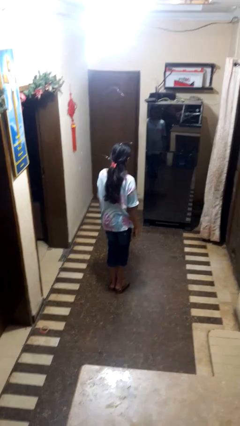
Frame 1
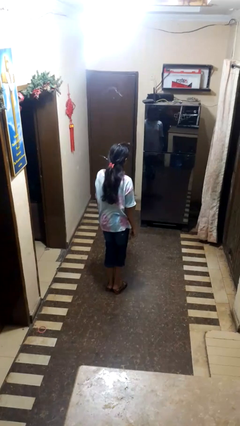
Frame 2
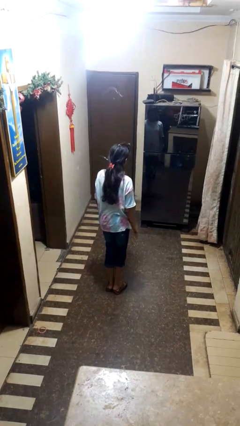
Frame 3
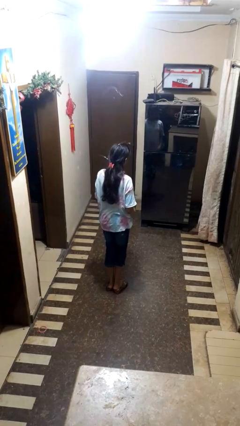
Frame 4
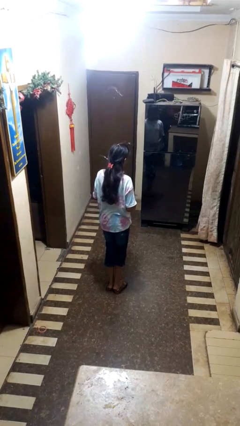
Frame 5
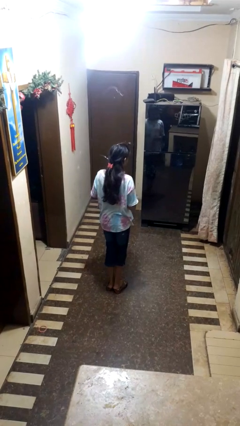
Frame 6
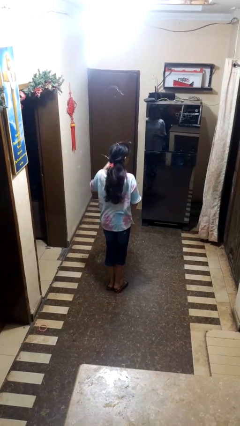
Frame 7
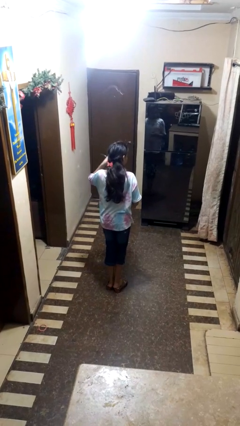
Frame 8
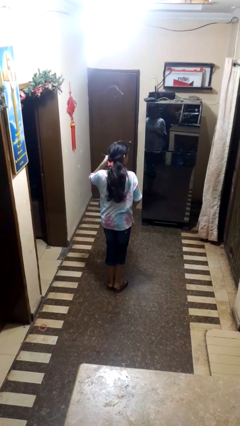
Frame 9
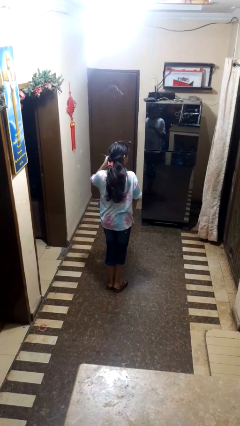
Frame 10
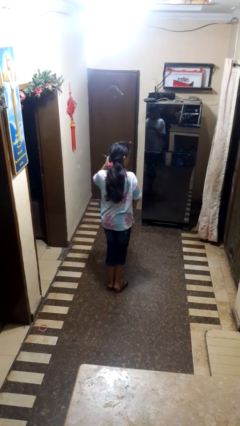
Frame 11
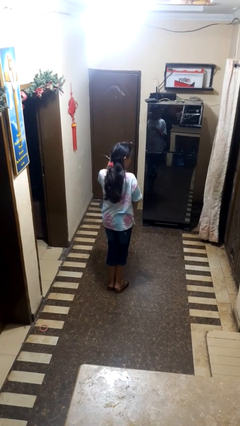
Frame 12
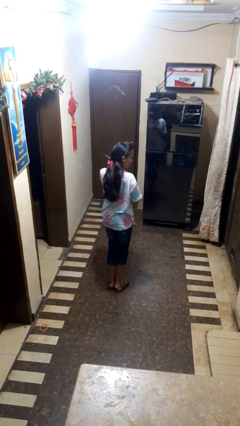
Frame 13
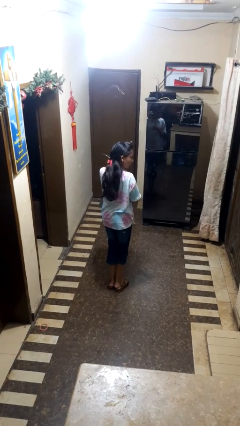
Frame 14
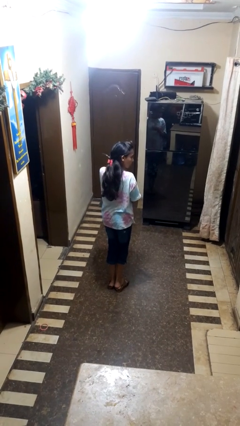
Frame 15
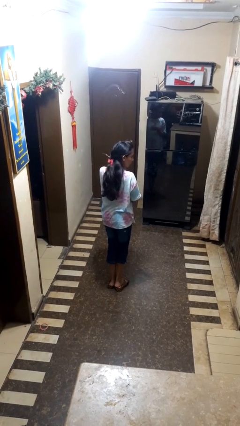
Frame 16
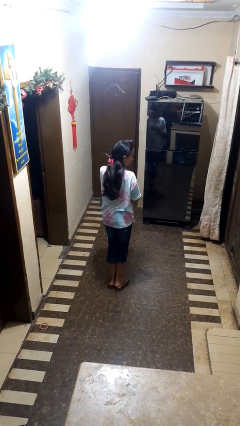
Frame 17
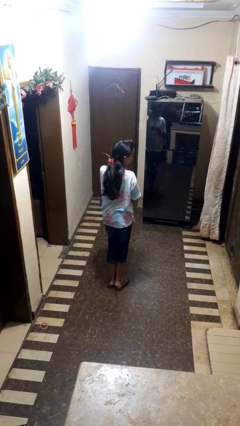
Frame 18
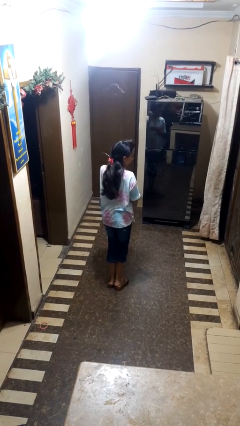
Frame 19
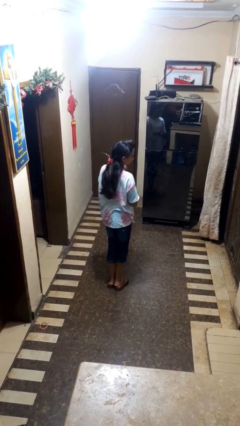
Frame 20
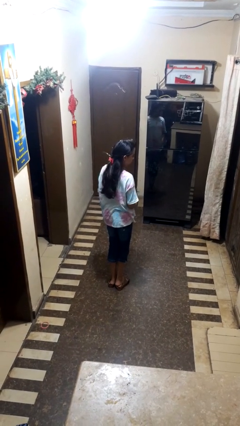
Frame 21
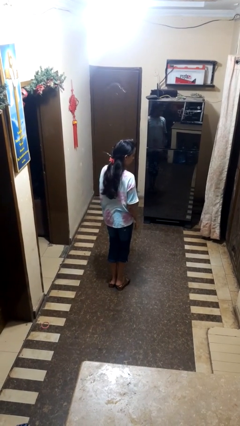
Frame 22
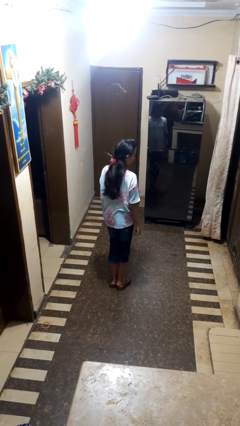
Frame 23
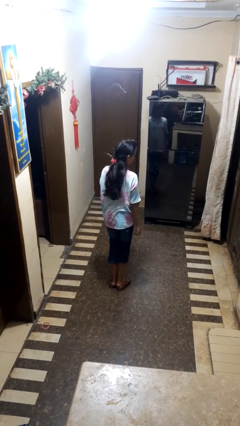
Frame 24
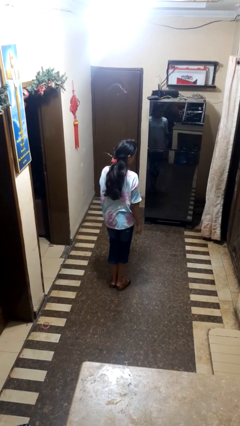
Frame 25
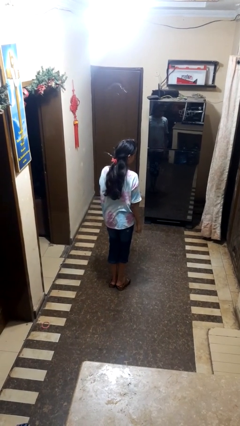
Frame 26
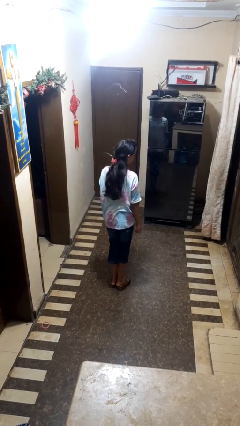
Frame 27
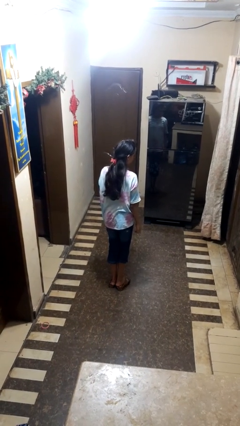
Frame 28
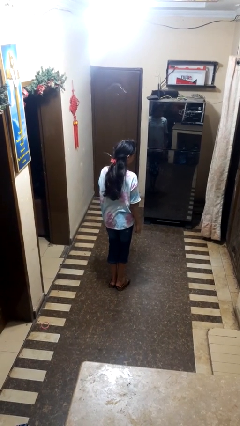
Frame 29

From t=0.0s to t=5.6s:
person puts on earrings

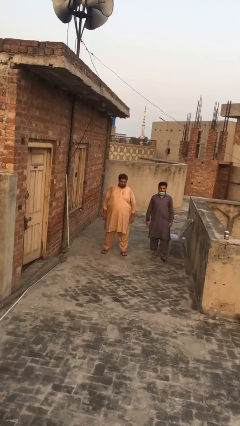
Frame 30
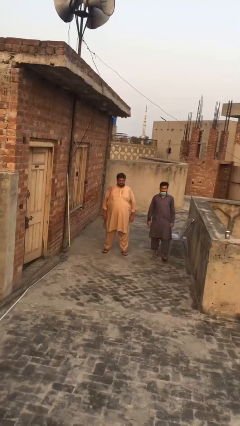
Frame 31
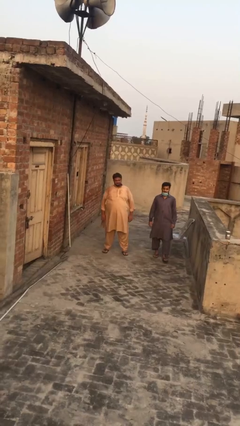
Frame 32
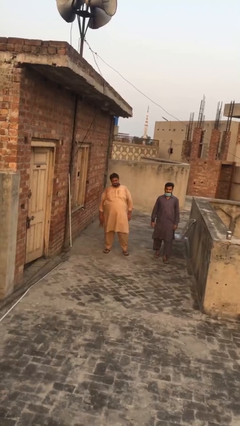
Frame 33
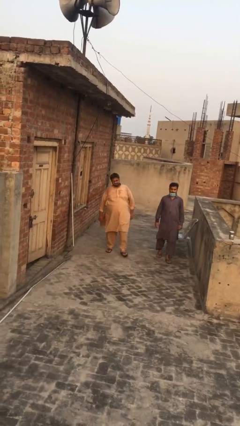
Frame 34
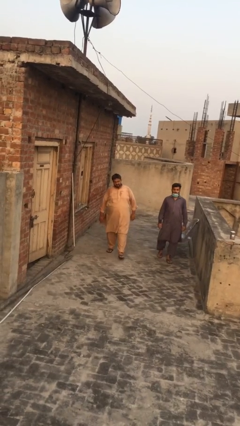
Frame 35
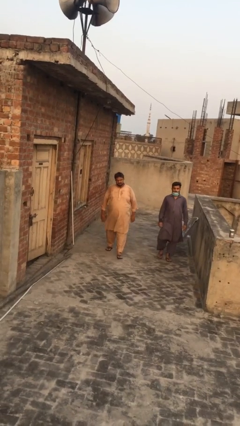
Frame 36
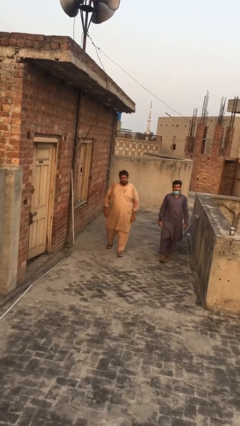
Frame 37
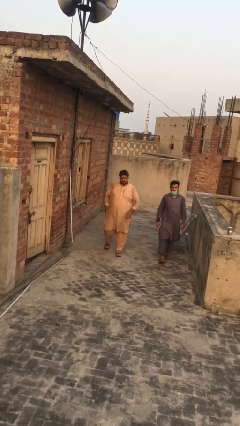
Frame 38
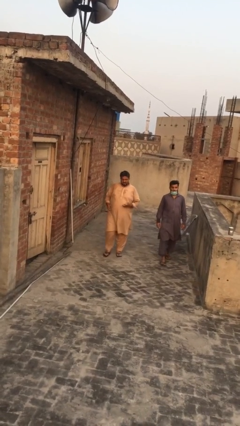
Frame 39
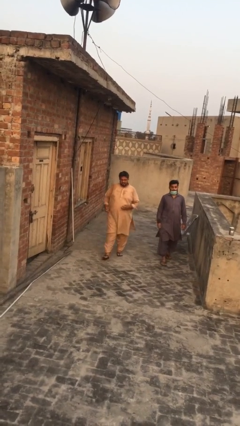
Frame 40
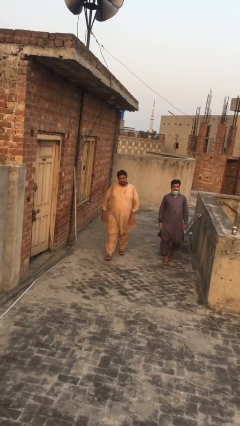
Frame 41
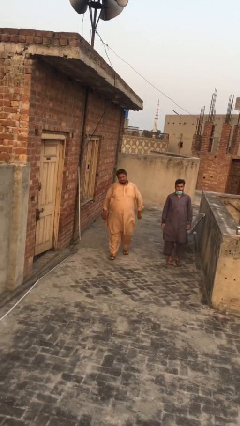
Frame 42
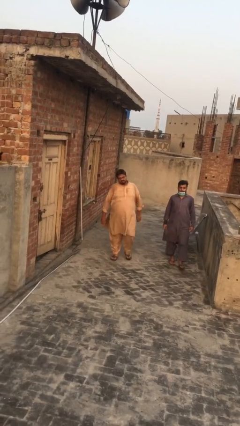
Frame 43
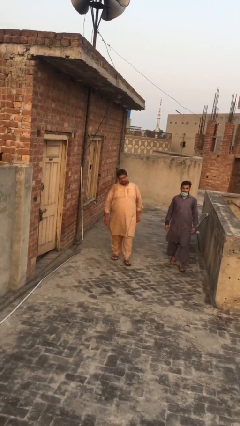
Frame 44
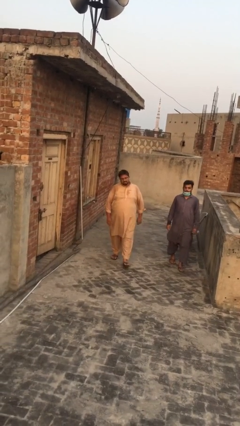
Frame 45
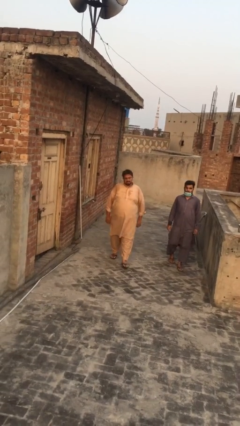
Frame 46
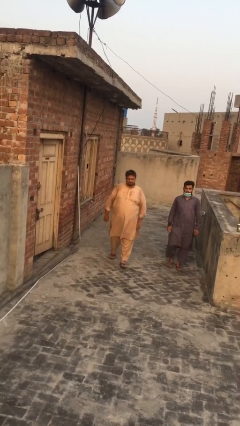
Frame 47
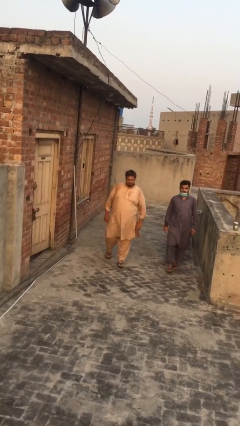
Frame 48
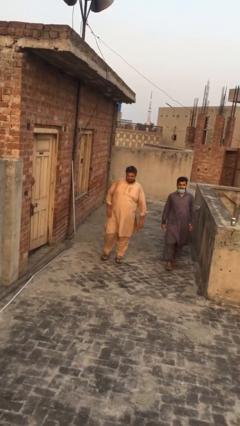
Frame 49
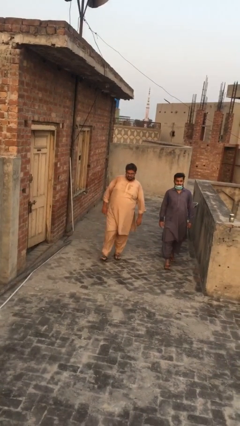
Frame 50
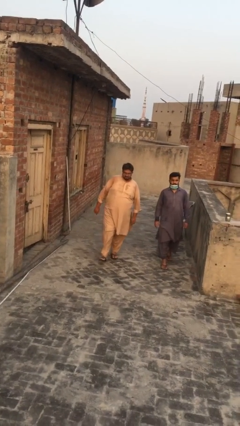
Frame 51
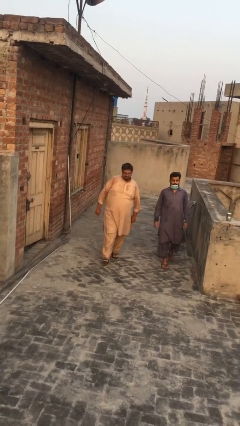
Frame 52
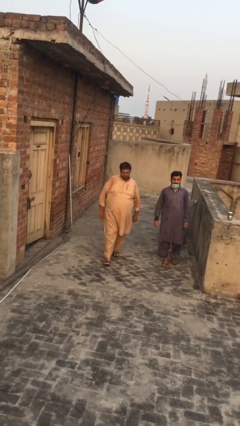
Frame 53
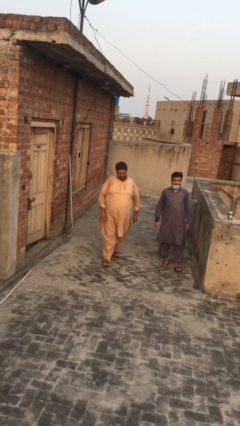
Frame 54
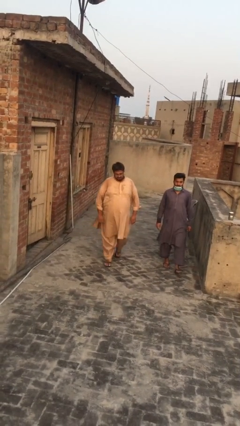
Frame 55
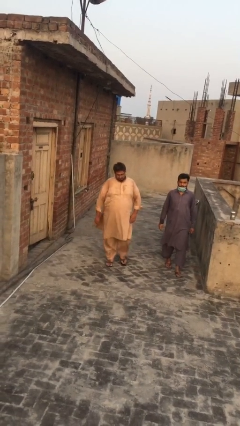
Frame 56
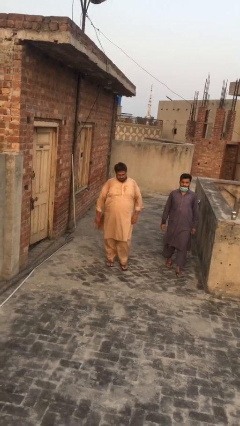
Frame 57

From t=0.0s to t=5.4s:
person talks to person

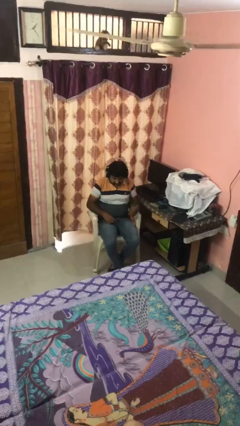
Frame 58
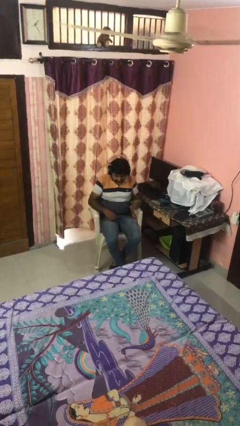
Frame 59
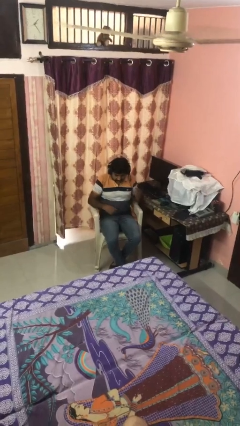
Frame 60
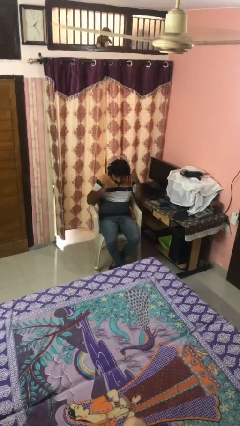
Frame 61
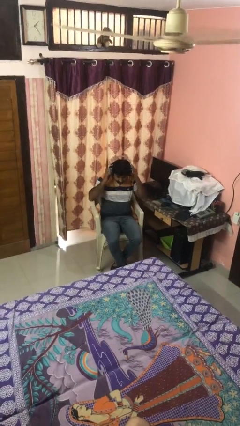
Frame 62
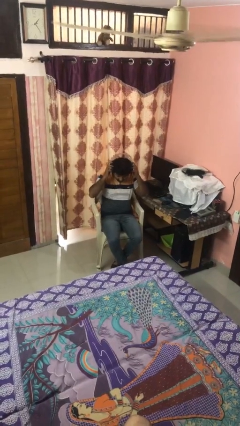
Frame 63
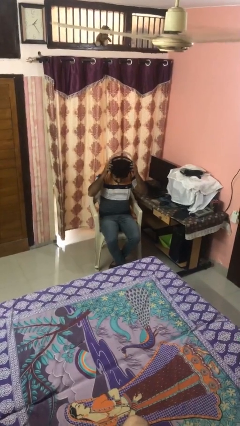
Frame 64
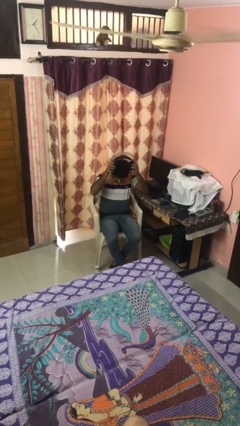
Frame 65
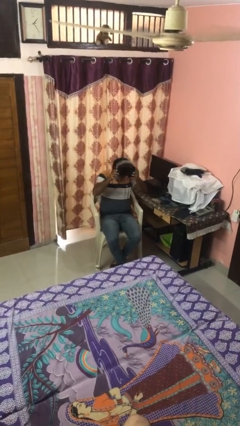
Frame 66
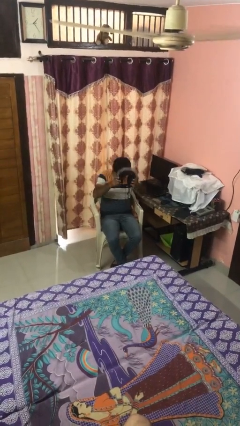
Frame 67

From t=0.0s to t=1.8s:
person takes off headphones

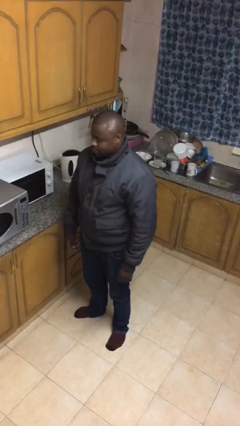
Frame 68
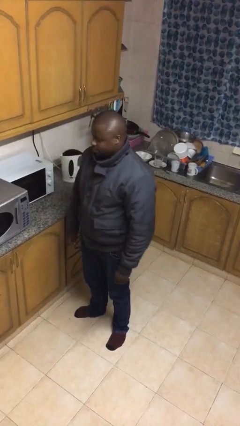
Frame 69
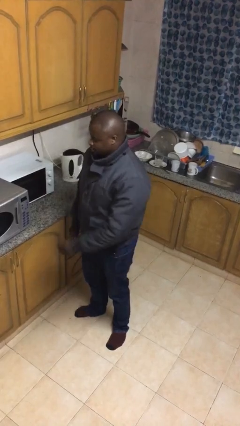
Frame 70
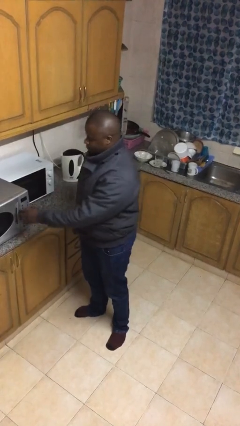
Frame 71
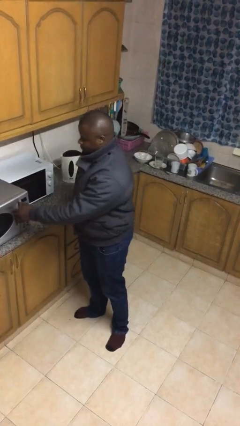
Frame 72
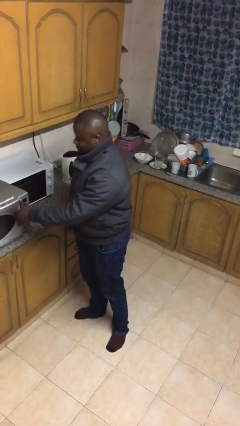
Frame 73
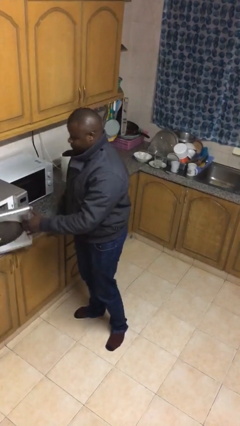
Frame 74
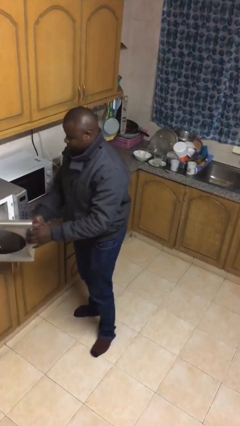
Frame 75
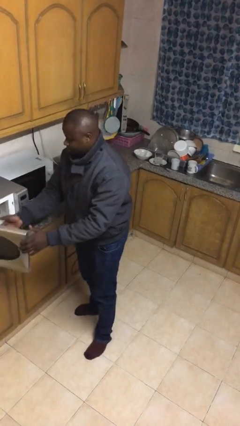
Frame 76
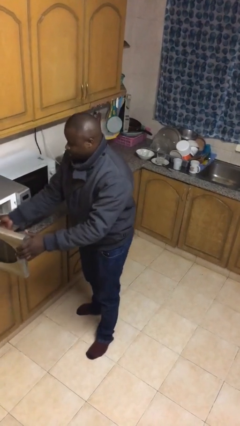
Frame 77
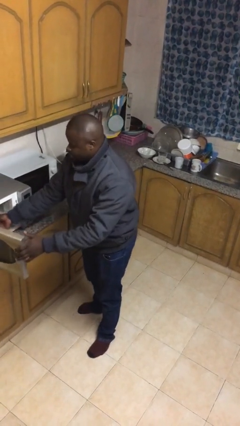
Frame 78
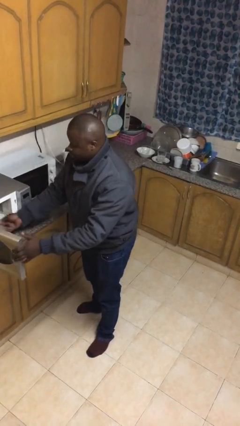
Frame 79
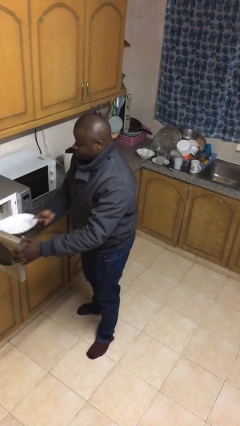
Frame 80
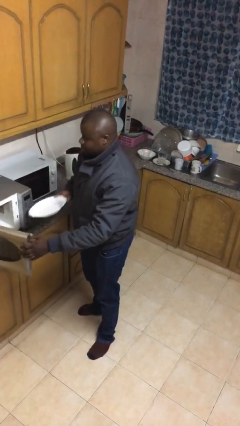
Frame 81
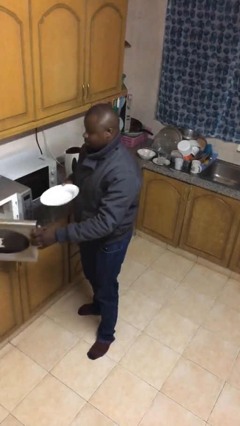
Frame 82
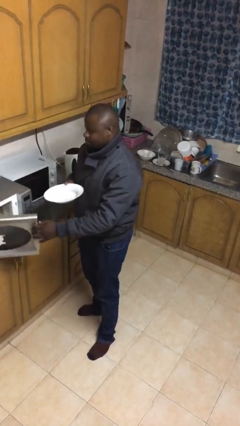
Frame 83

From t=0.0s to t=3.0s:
person takes object from microwave

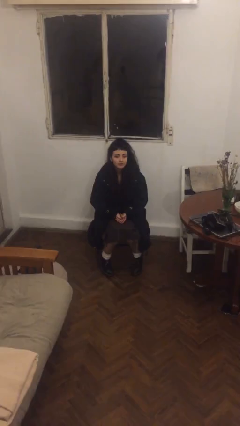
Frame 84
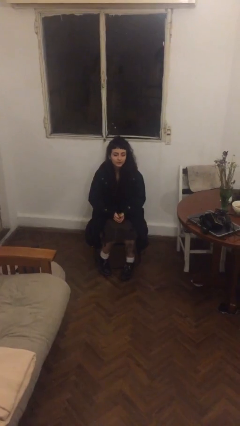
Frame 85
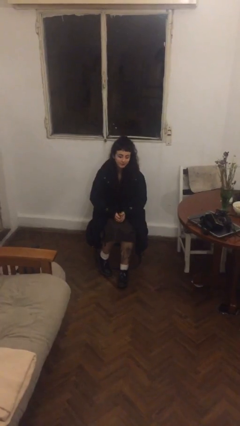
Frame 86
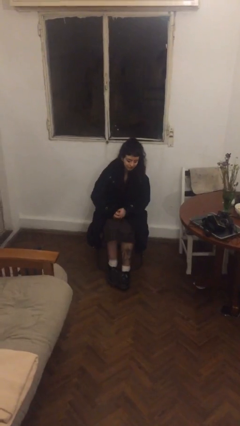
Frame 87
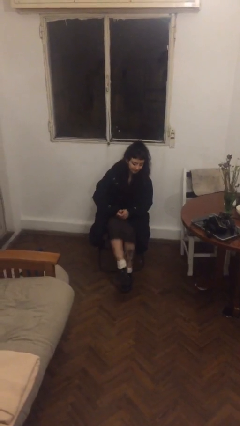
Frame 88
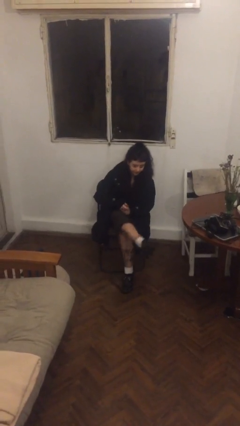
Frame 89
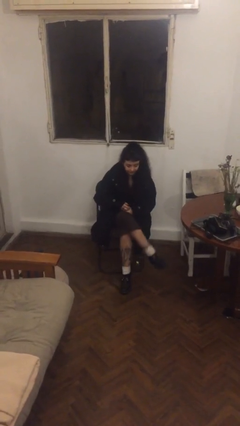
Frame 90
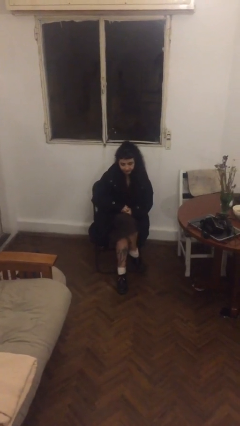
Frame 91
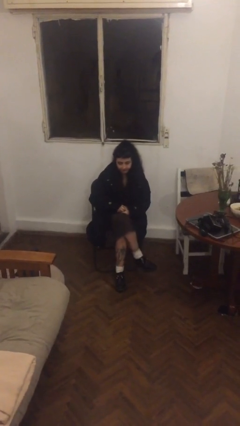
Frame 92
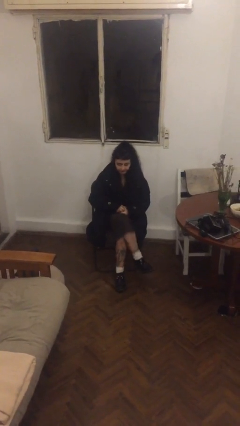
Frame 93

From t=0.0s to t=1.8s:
person crosses legs
